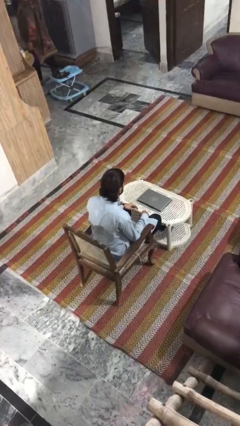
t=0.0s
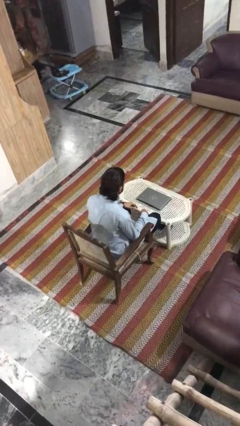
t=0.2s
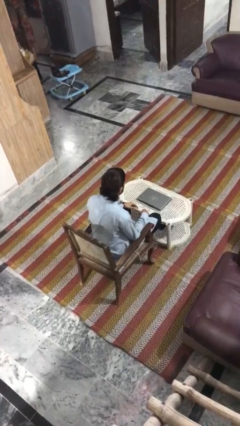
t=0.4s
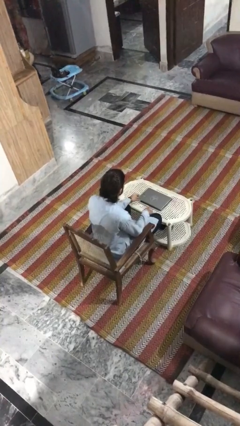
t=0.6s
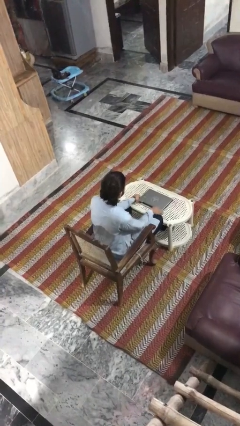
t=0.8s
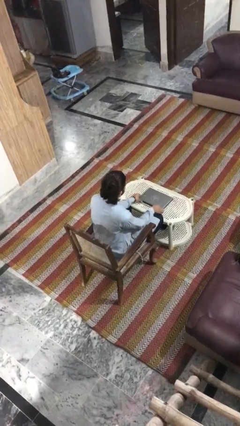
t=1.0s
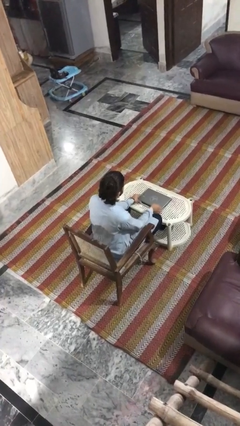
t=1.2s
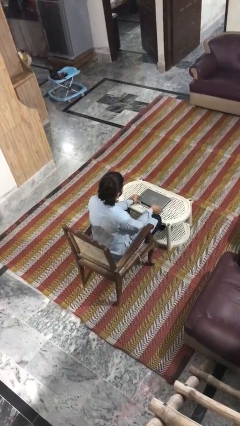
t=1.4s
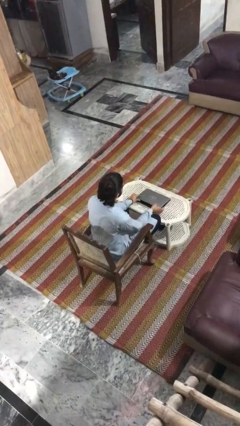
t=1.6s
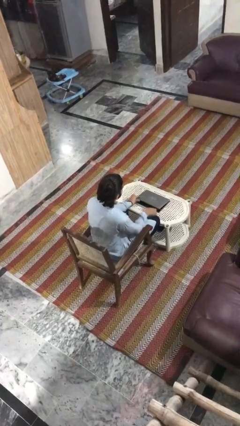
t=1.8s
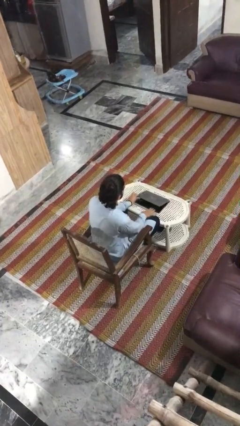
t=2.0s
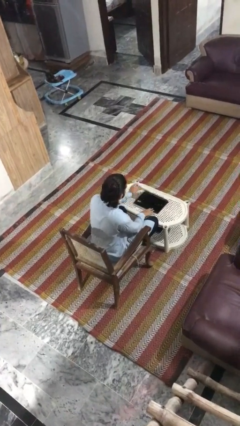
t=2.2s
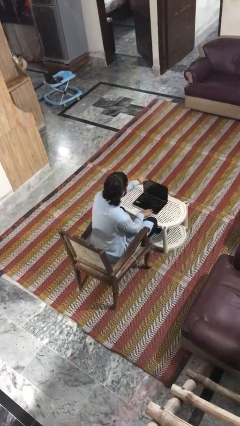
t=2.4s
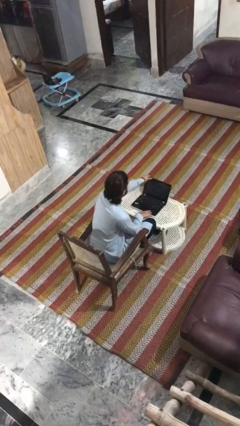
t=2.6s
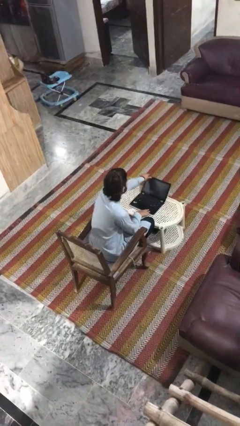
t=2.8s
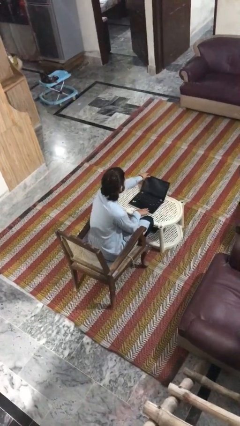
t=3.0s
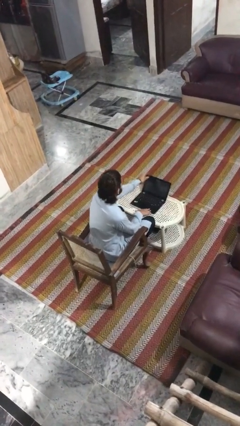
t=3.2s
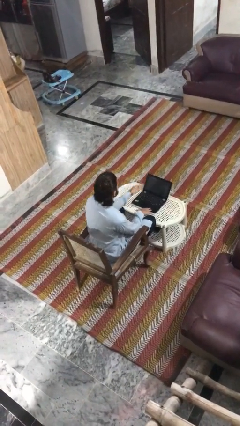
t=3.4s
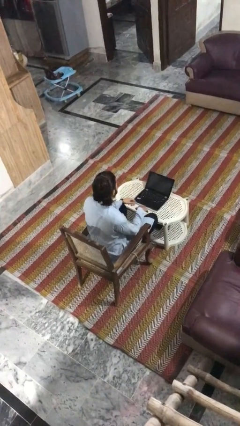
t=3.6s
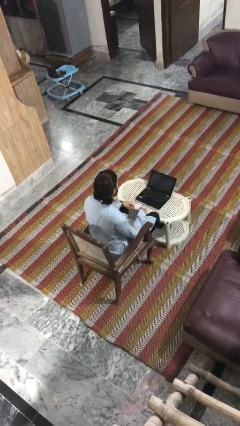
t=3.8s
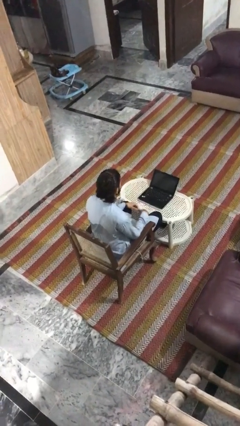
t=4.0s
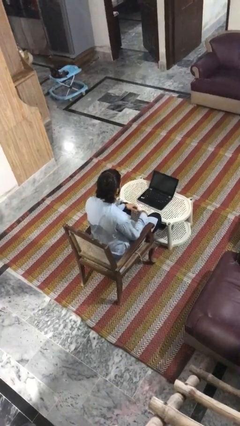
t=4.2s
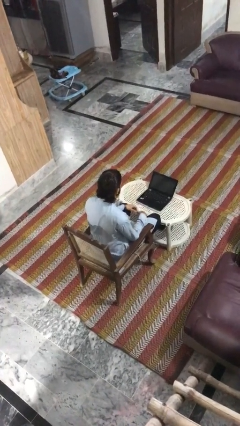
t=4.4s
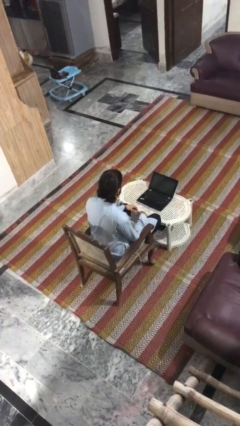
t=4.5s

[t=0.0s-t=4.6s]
person opens laptop

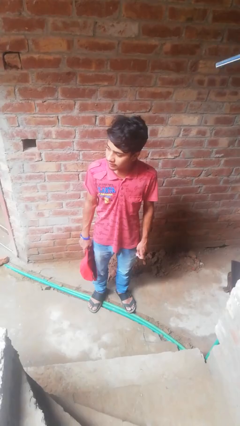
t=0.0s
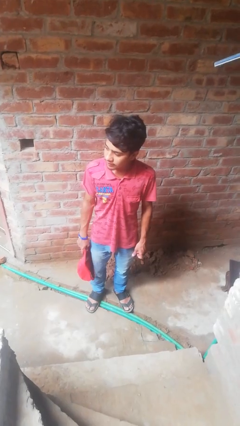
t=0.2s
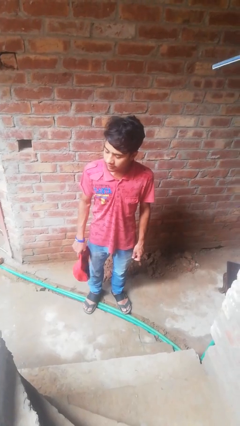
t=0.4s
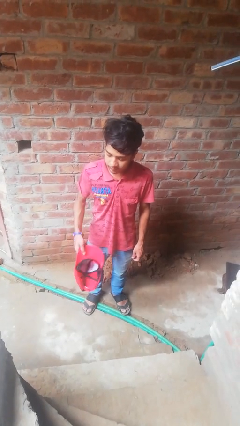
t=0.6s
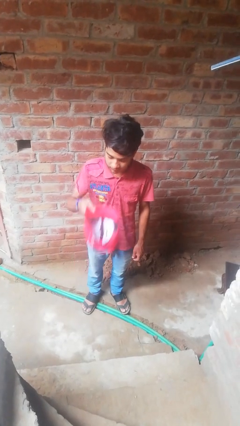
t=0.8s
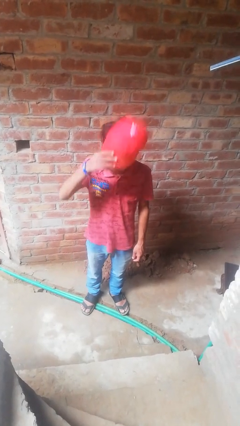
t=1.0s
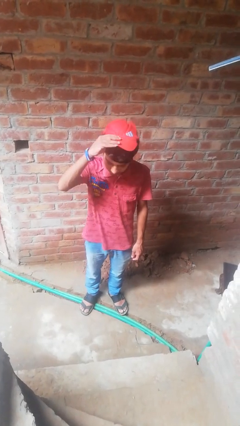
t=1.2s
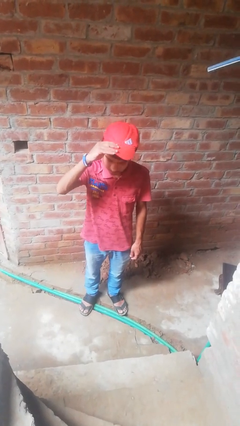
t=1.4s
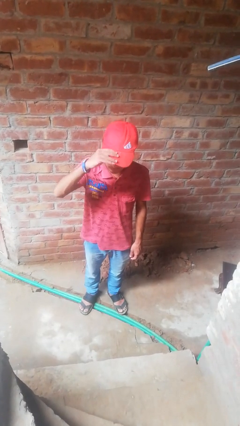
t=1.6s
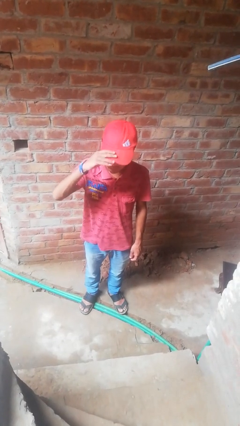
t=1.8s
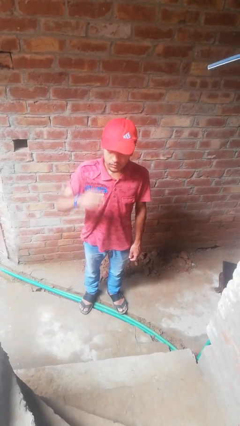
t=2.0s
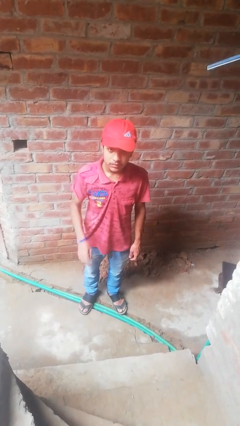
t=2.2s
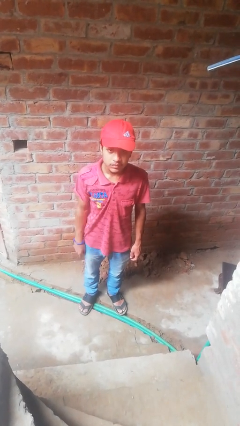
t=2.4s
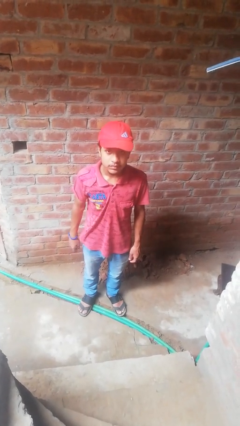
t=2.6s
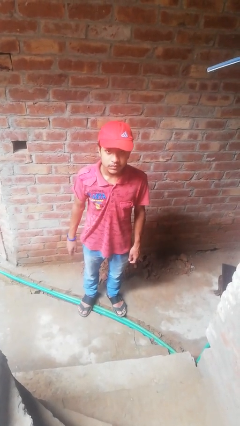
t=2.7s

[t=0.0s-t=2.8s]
person puts on hat

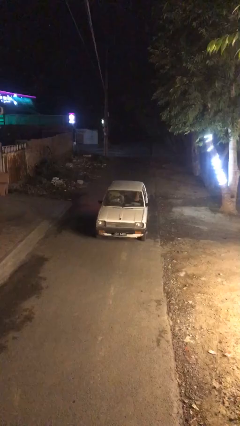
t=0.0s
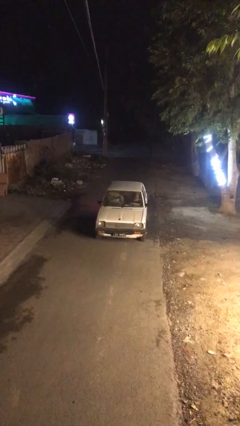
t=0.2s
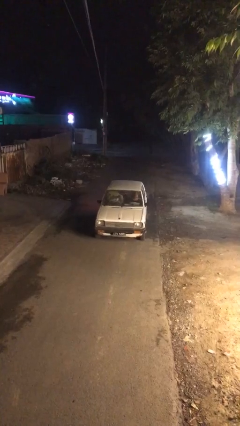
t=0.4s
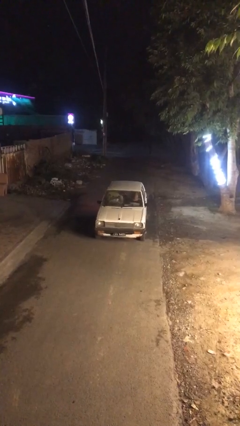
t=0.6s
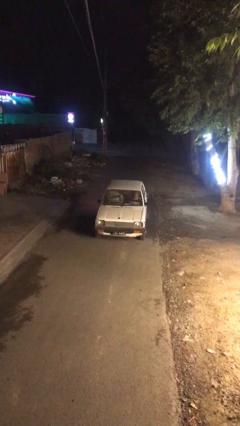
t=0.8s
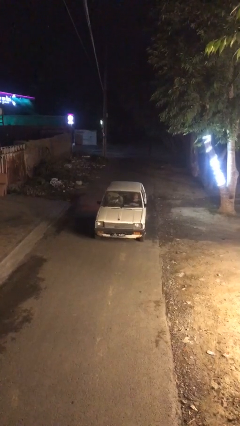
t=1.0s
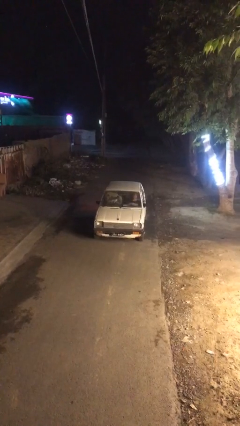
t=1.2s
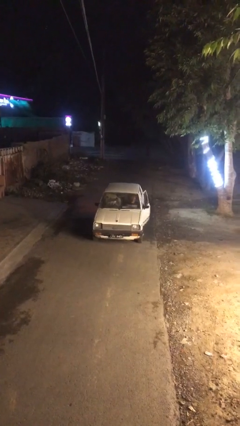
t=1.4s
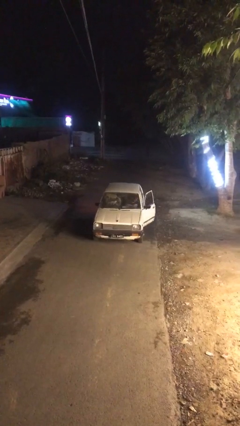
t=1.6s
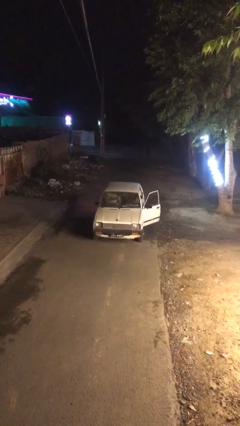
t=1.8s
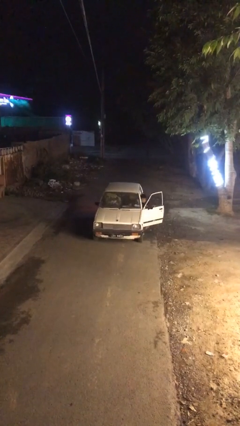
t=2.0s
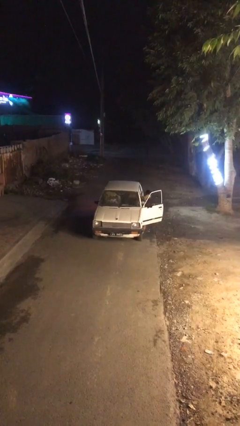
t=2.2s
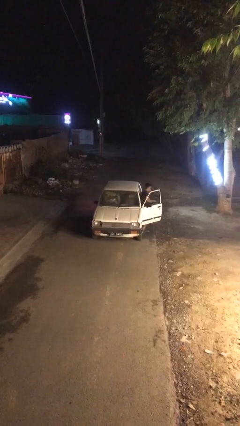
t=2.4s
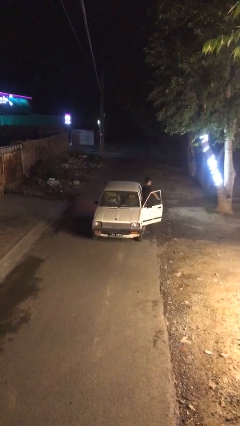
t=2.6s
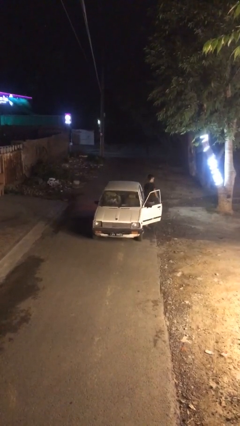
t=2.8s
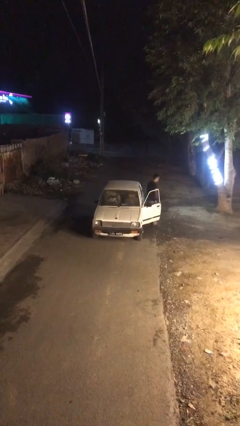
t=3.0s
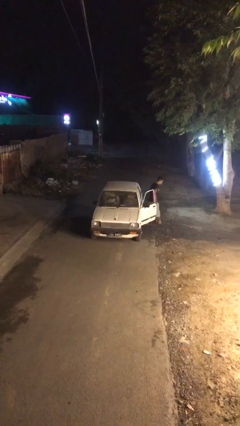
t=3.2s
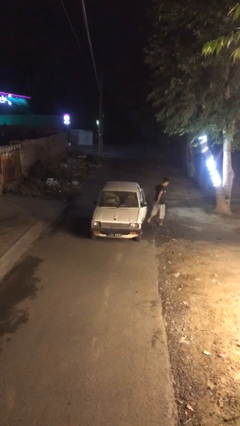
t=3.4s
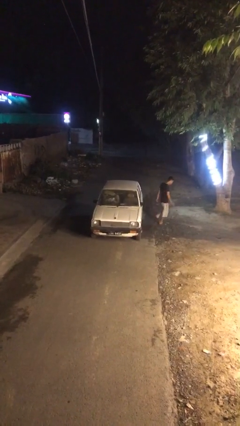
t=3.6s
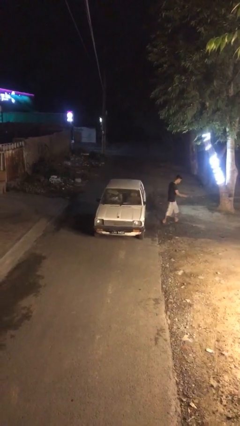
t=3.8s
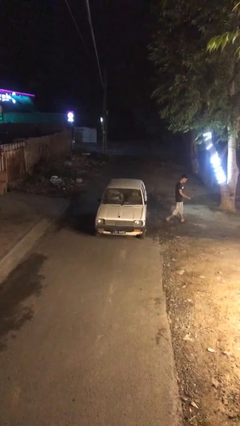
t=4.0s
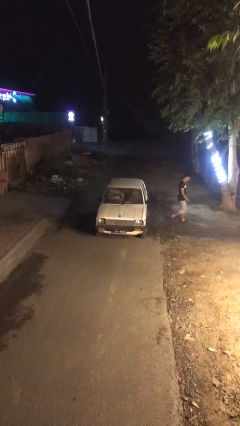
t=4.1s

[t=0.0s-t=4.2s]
car drops off person

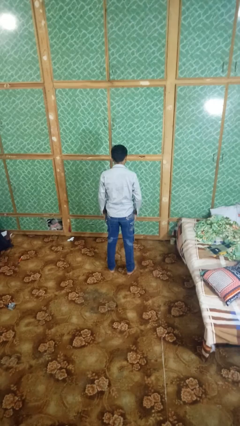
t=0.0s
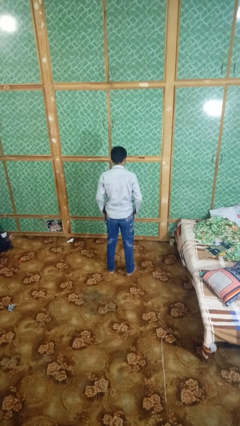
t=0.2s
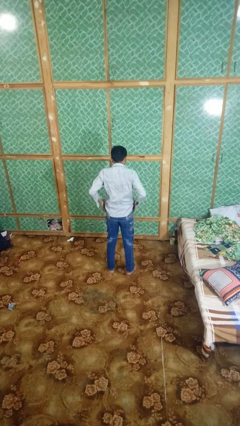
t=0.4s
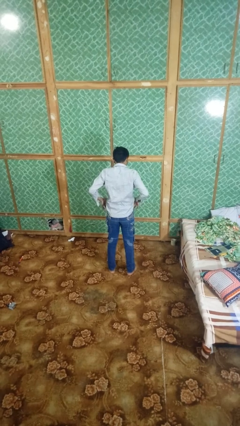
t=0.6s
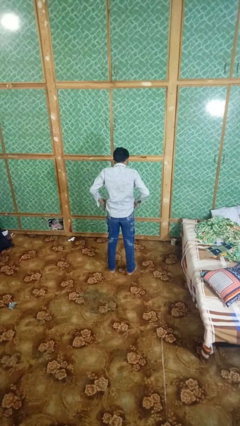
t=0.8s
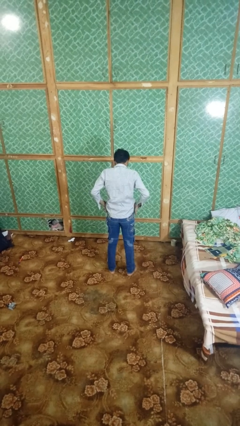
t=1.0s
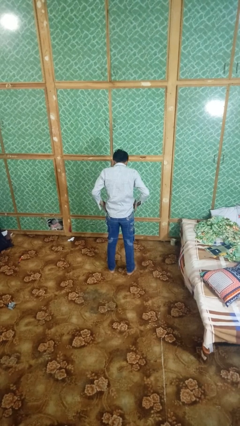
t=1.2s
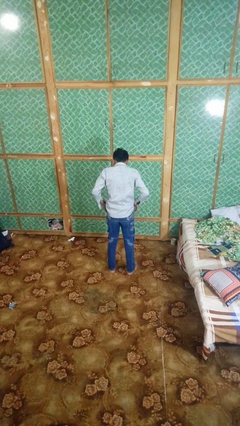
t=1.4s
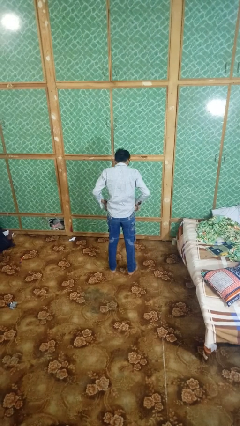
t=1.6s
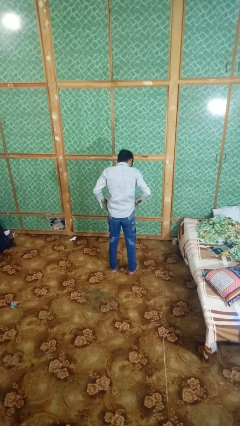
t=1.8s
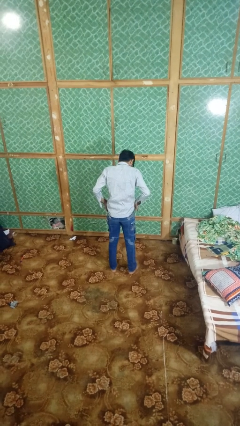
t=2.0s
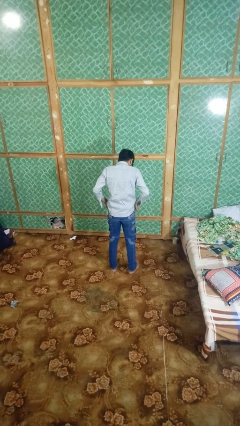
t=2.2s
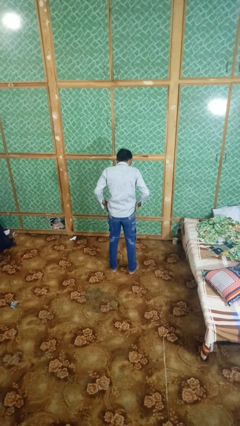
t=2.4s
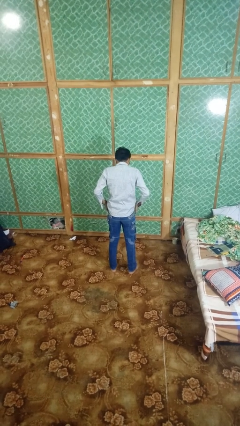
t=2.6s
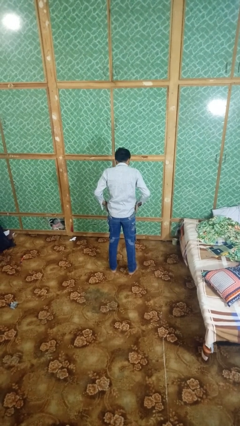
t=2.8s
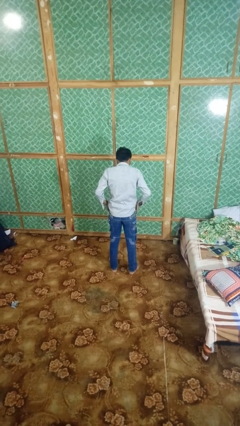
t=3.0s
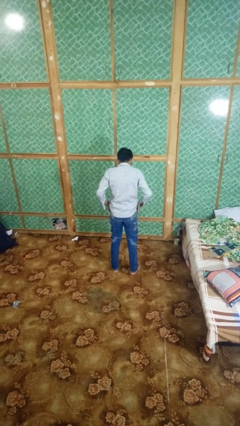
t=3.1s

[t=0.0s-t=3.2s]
person puts hands in back pockets

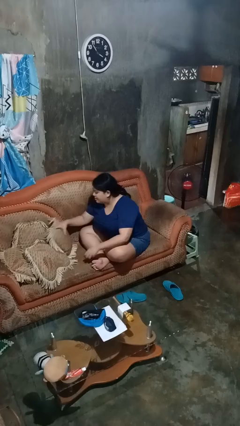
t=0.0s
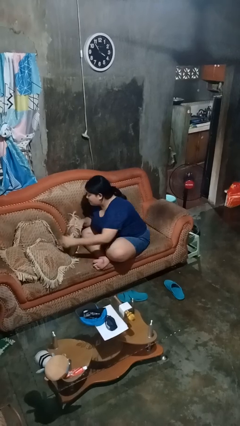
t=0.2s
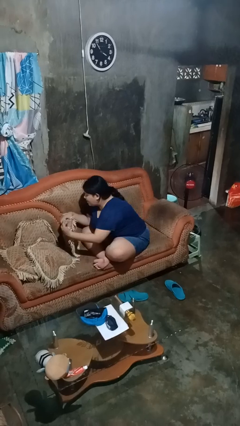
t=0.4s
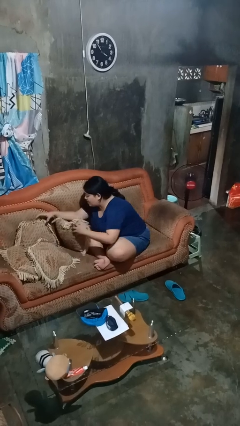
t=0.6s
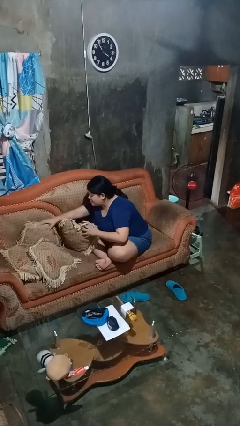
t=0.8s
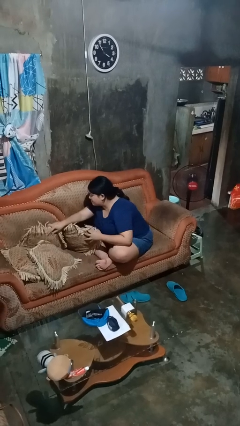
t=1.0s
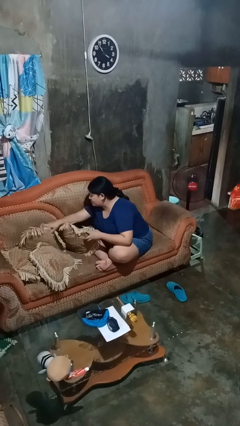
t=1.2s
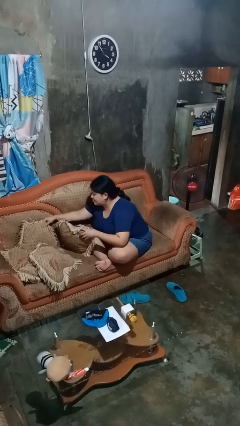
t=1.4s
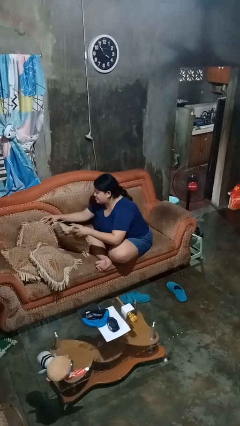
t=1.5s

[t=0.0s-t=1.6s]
person searches in couch

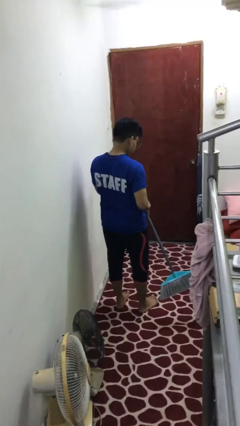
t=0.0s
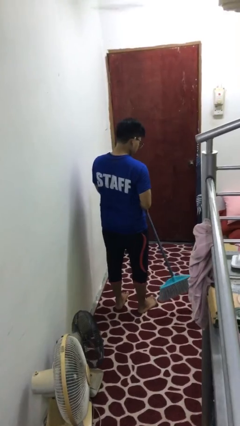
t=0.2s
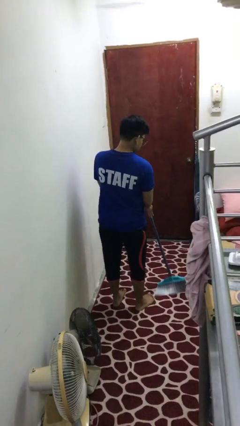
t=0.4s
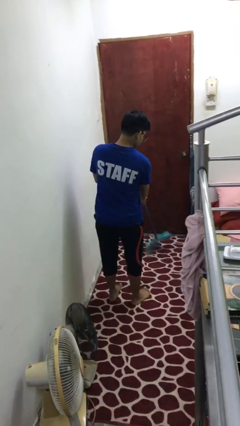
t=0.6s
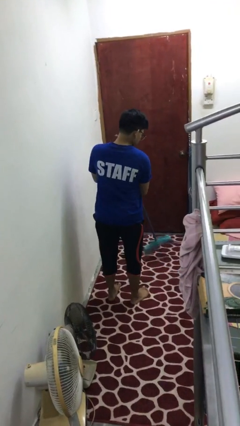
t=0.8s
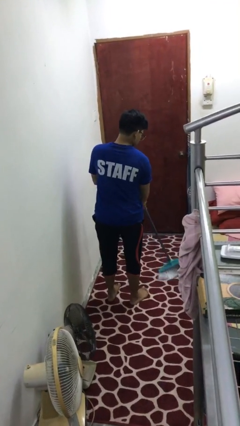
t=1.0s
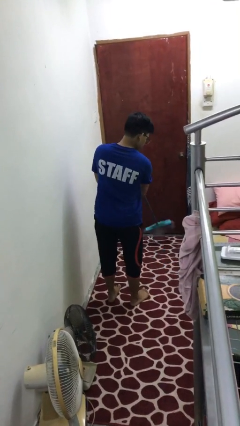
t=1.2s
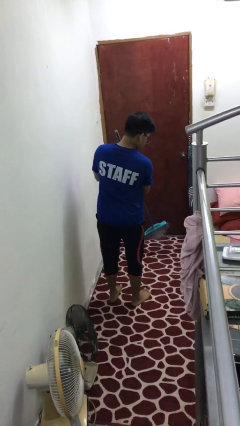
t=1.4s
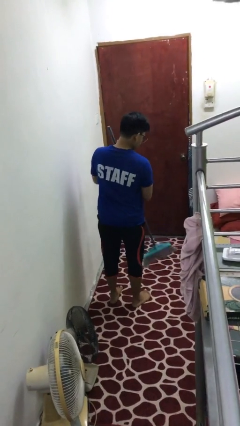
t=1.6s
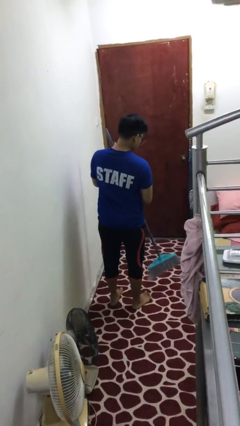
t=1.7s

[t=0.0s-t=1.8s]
person sweeps floor
